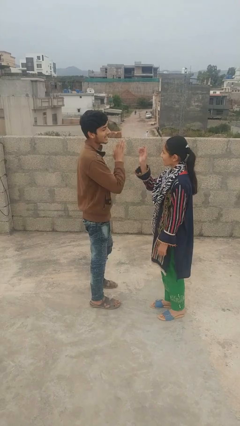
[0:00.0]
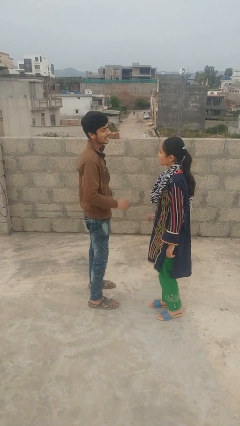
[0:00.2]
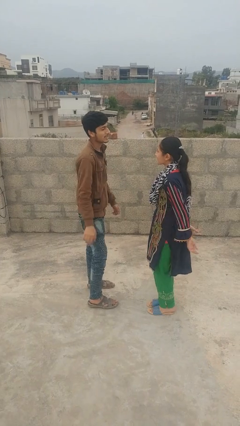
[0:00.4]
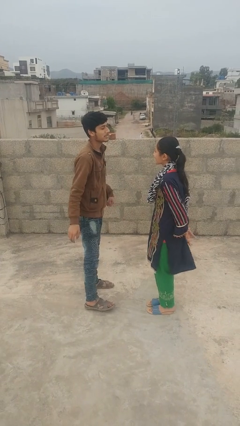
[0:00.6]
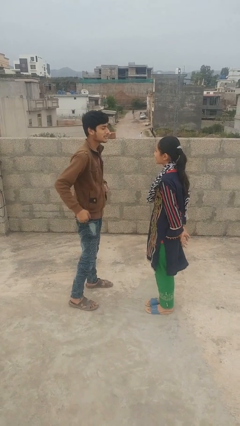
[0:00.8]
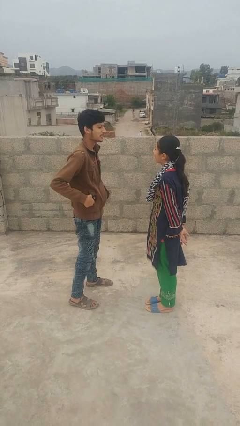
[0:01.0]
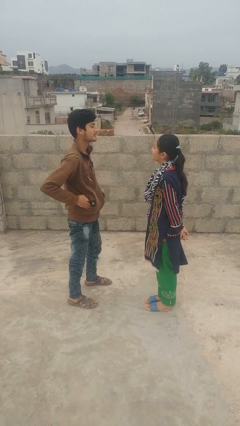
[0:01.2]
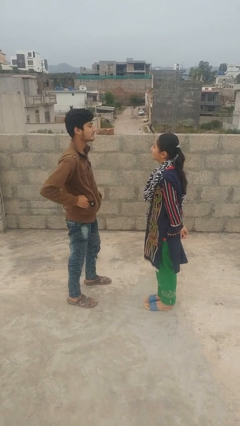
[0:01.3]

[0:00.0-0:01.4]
person highfives hand

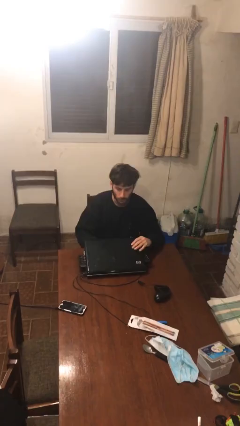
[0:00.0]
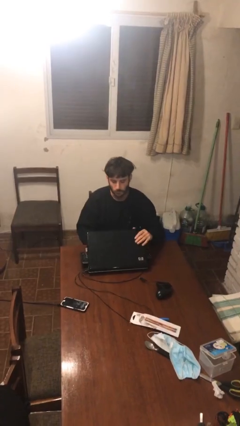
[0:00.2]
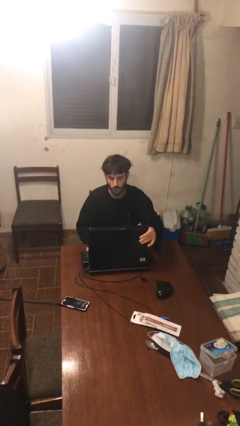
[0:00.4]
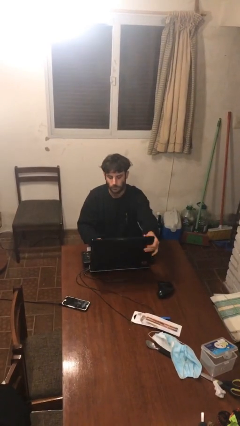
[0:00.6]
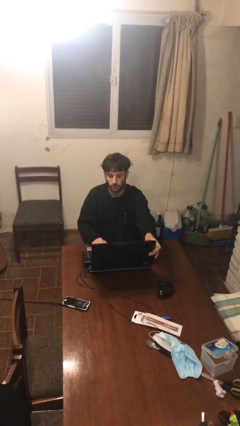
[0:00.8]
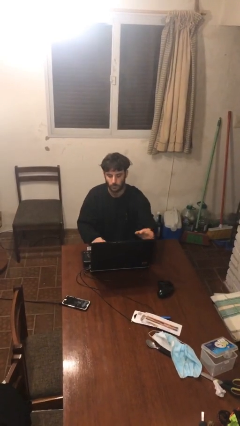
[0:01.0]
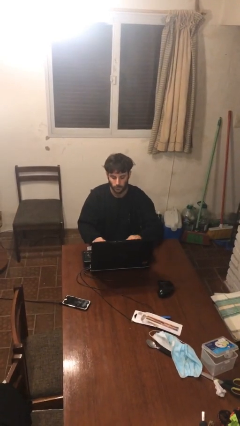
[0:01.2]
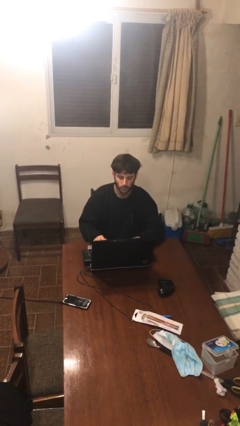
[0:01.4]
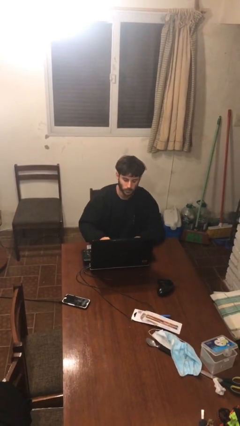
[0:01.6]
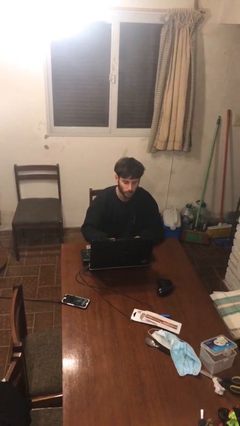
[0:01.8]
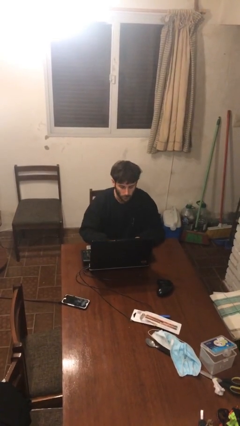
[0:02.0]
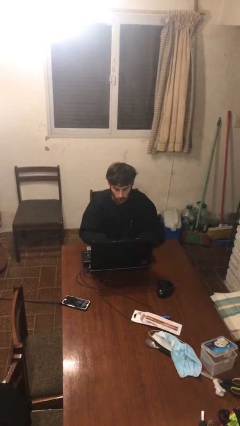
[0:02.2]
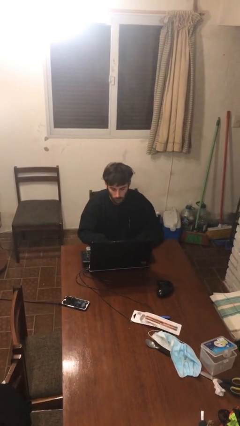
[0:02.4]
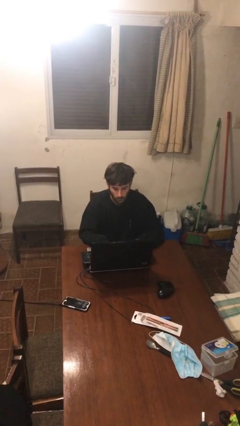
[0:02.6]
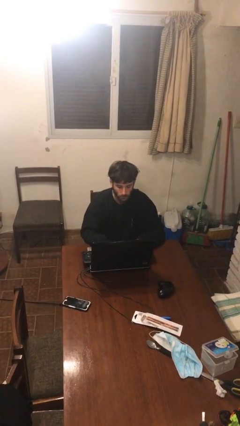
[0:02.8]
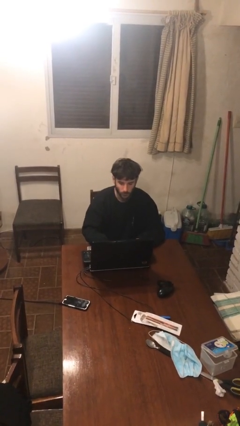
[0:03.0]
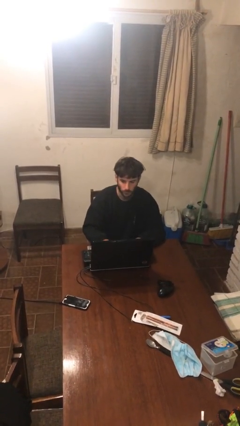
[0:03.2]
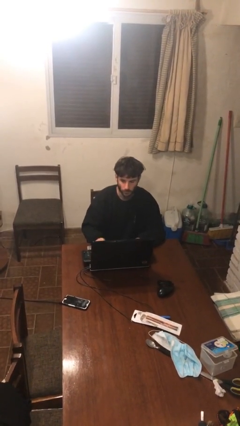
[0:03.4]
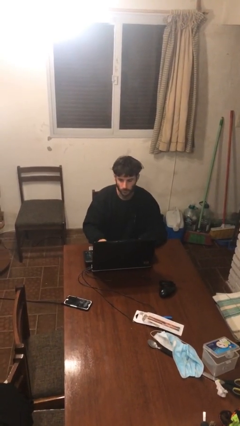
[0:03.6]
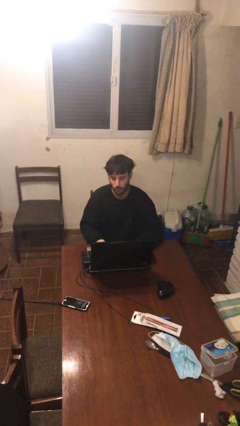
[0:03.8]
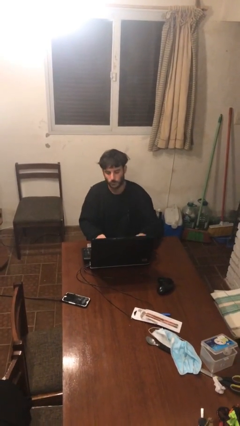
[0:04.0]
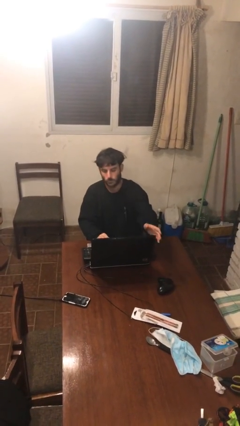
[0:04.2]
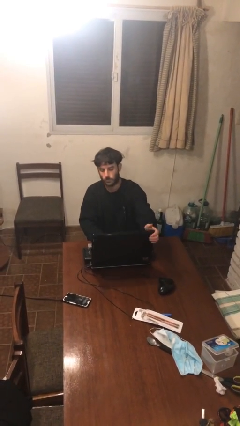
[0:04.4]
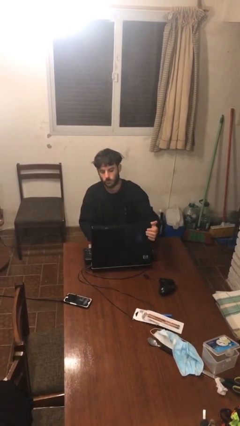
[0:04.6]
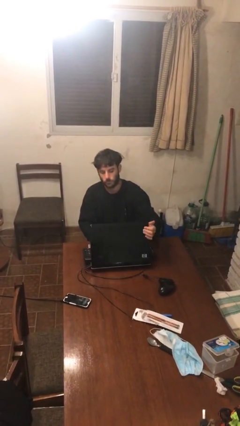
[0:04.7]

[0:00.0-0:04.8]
person interacts with laptop

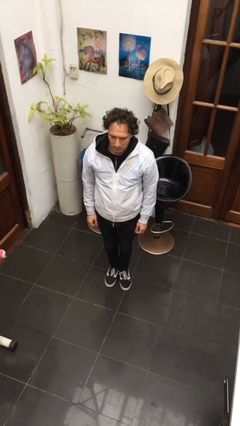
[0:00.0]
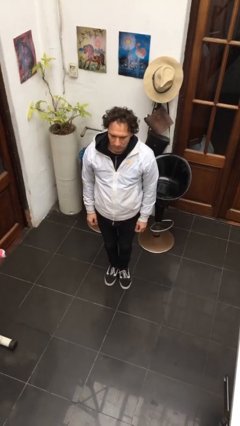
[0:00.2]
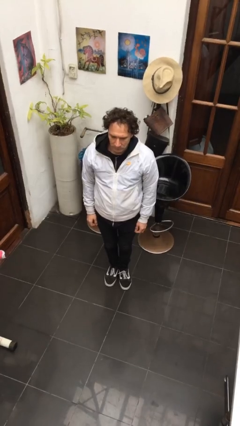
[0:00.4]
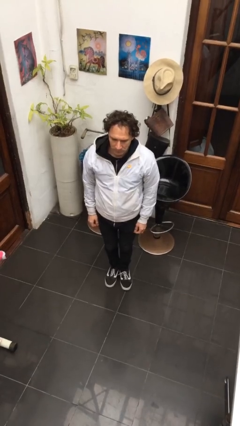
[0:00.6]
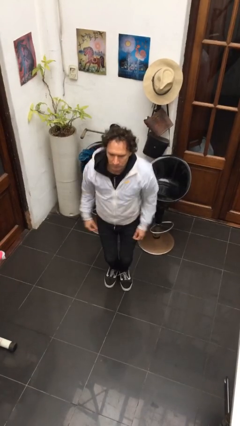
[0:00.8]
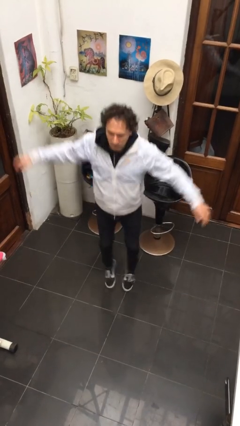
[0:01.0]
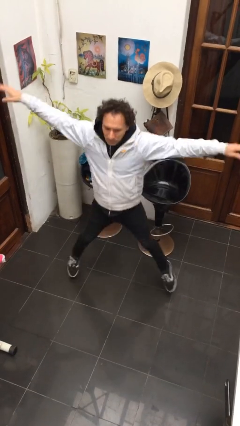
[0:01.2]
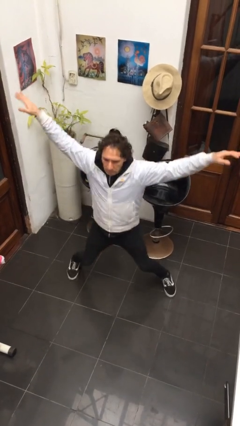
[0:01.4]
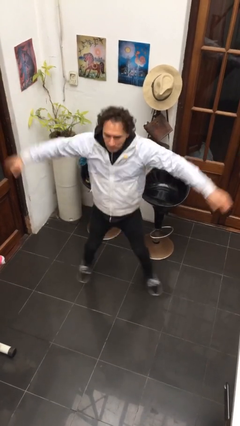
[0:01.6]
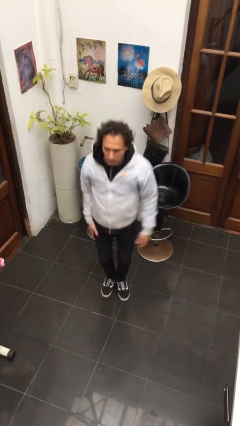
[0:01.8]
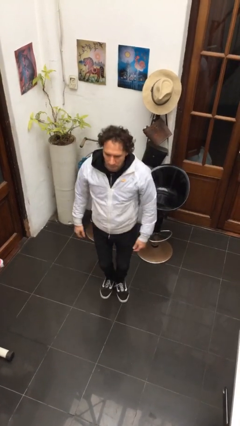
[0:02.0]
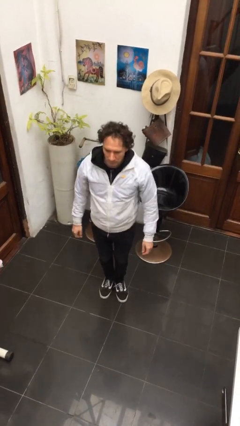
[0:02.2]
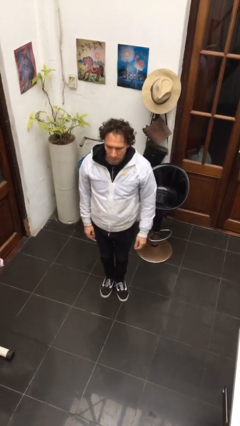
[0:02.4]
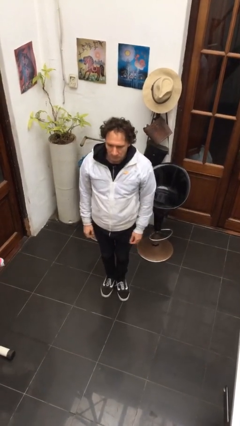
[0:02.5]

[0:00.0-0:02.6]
person exercises with jumping jacks

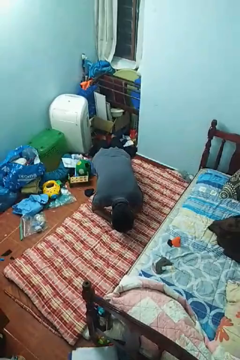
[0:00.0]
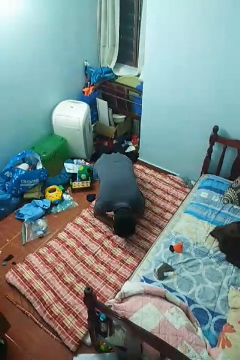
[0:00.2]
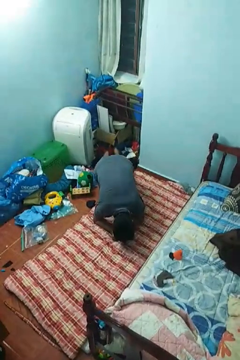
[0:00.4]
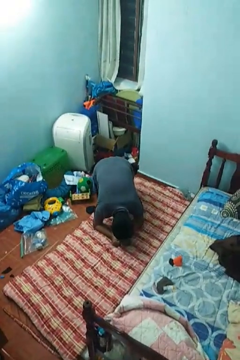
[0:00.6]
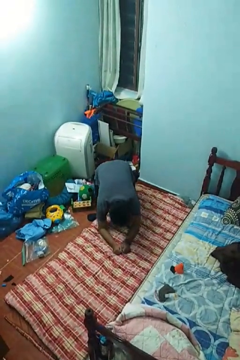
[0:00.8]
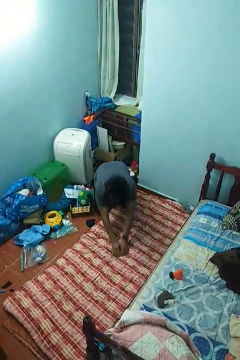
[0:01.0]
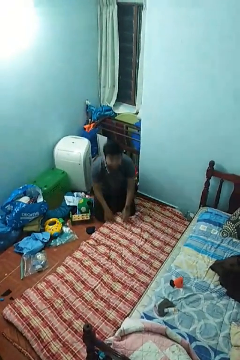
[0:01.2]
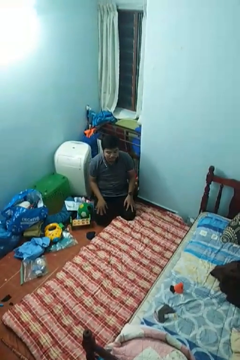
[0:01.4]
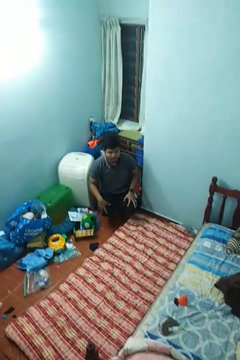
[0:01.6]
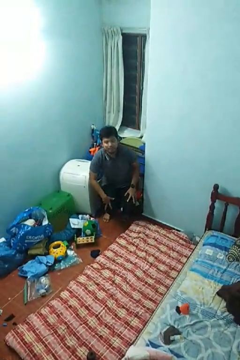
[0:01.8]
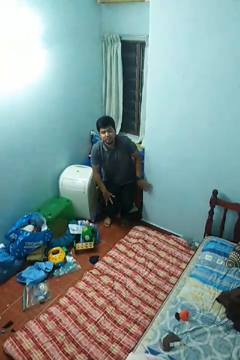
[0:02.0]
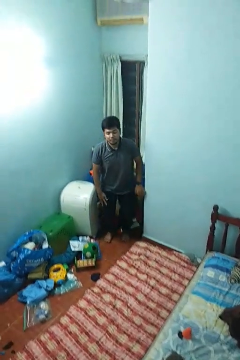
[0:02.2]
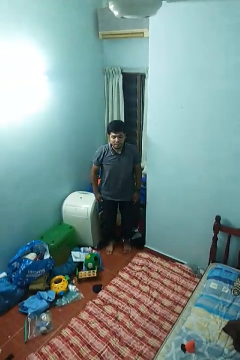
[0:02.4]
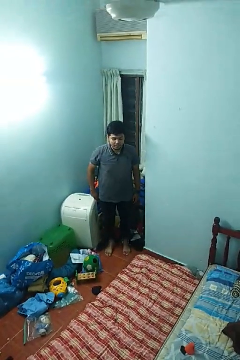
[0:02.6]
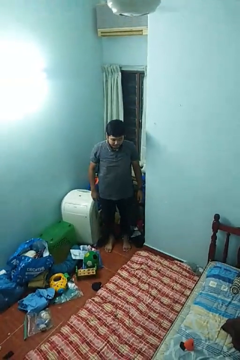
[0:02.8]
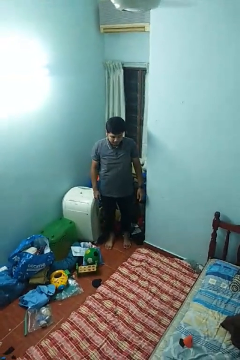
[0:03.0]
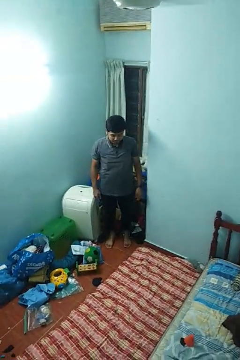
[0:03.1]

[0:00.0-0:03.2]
person stands up from floor

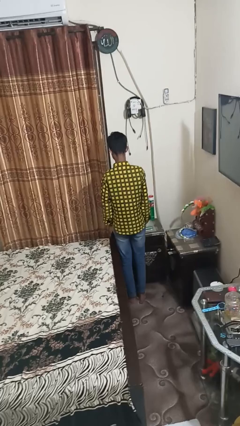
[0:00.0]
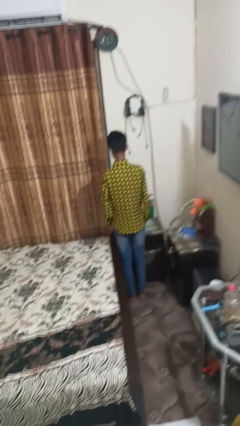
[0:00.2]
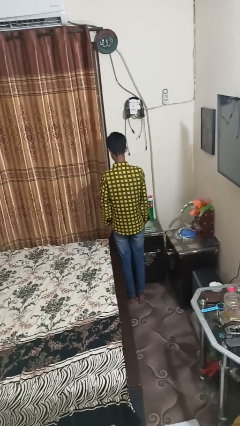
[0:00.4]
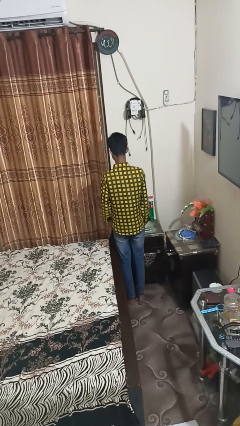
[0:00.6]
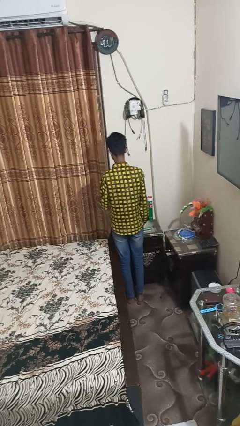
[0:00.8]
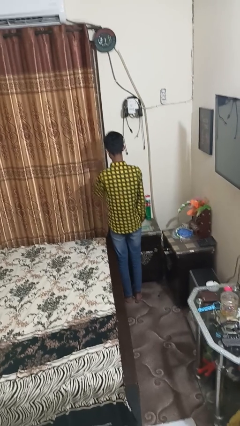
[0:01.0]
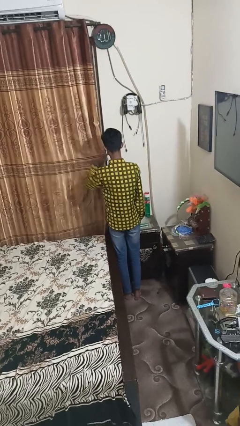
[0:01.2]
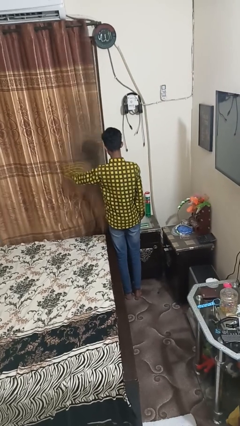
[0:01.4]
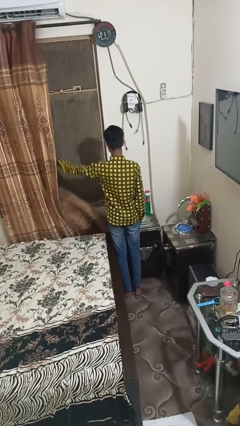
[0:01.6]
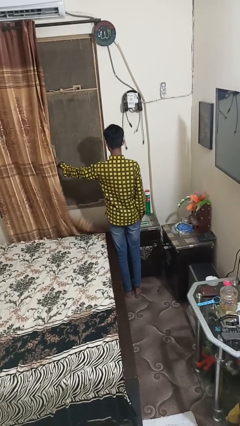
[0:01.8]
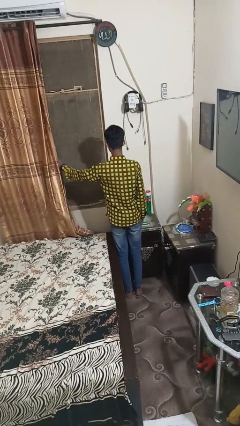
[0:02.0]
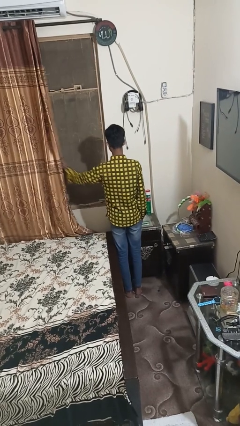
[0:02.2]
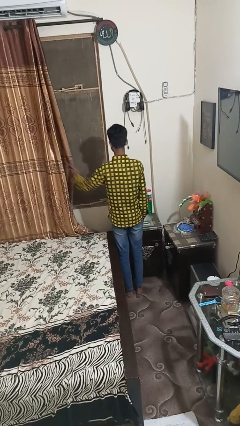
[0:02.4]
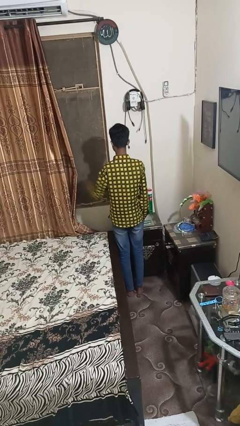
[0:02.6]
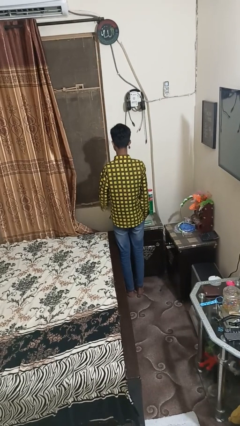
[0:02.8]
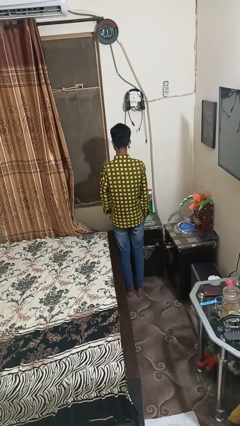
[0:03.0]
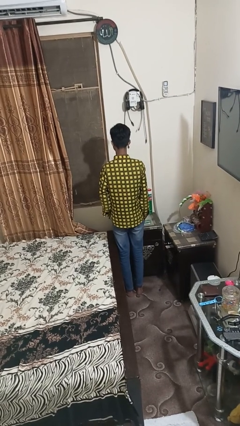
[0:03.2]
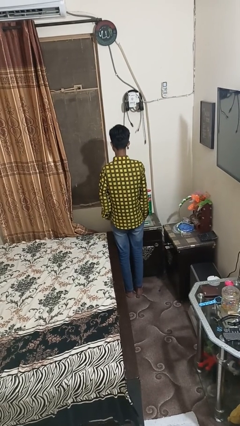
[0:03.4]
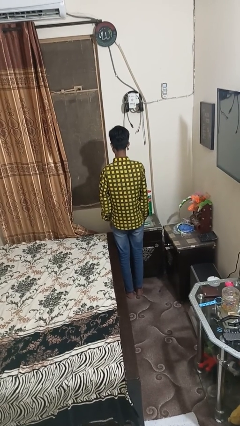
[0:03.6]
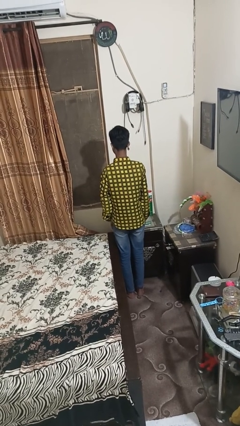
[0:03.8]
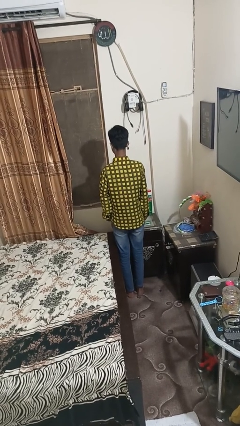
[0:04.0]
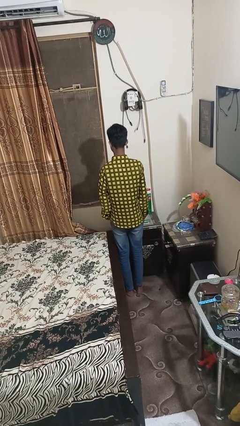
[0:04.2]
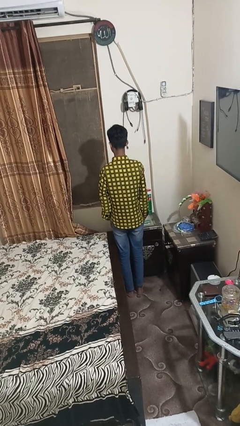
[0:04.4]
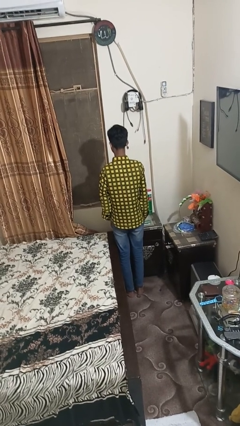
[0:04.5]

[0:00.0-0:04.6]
person opens curtains

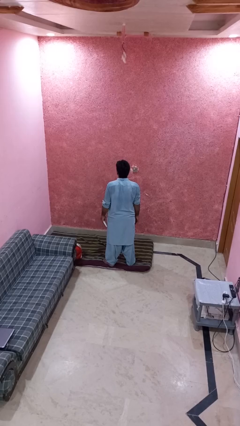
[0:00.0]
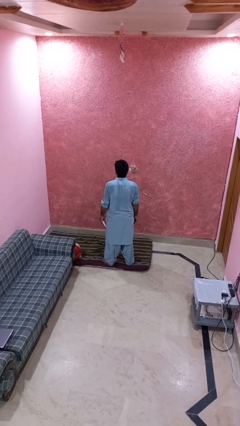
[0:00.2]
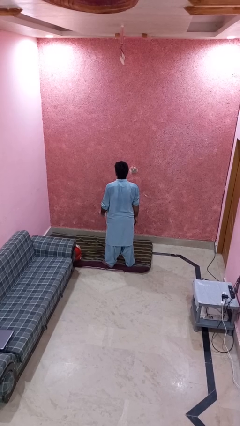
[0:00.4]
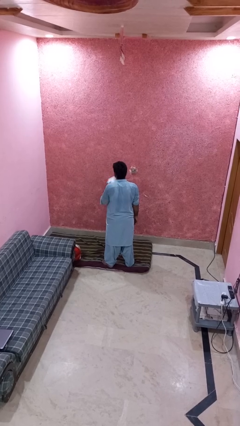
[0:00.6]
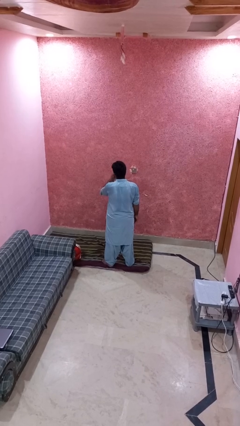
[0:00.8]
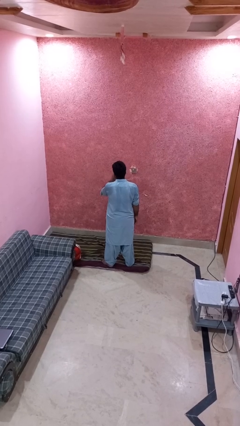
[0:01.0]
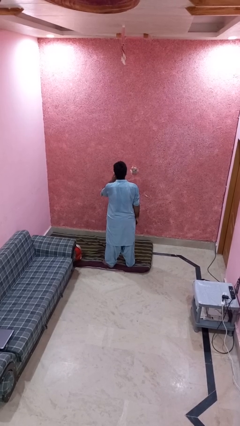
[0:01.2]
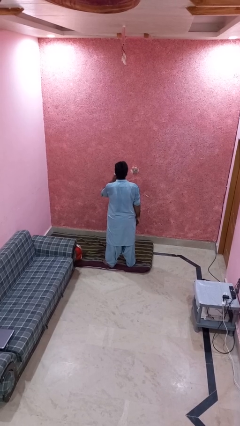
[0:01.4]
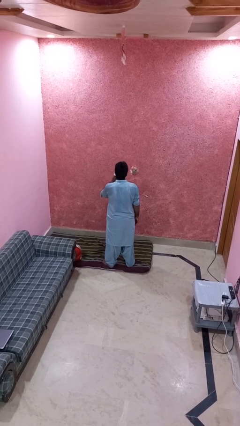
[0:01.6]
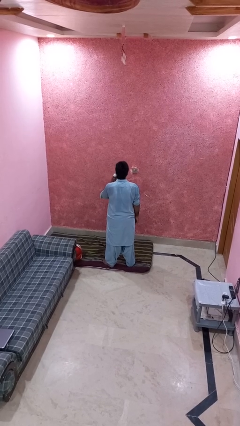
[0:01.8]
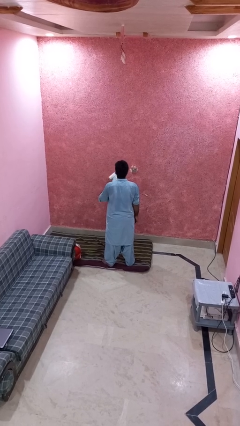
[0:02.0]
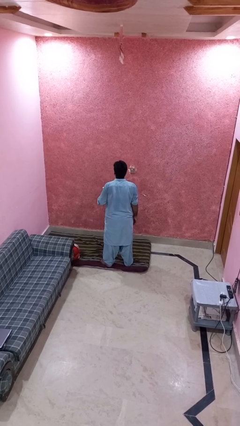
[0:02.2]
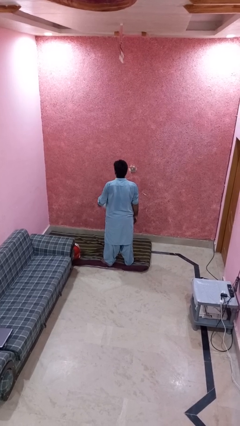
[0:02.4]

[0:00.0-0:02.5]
person wipes mouth with napkin
